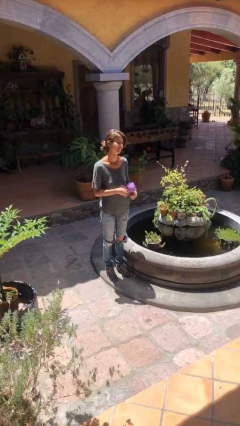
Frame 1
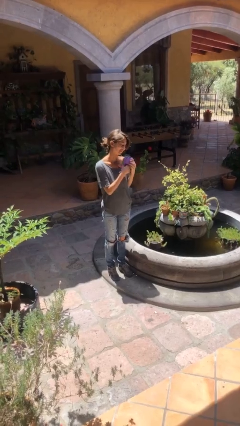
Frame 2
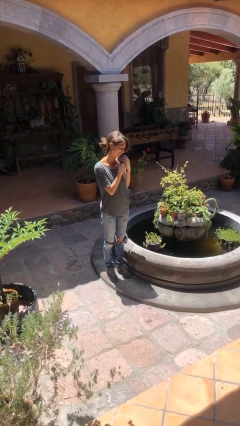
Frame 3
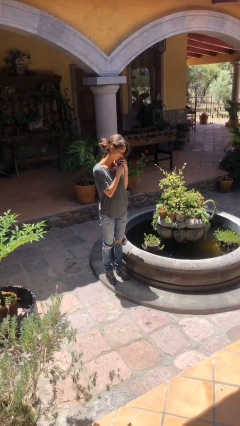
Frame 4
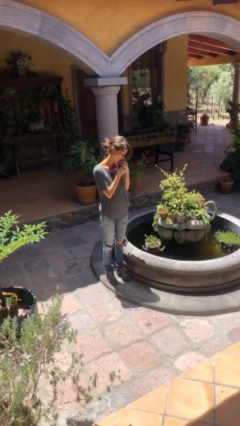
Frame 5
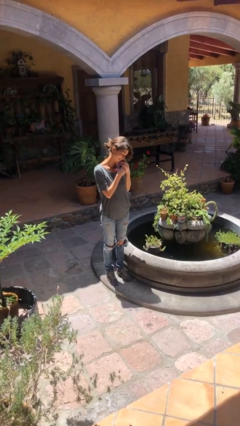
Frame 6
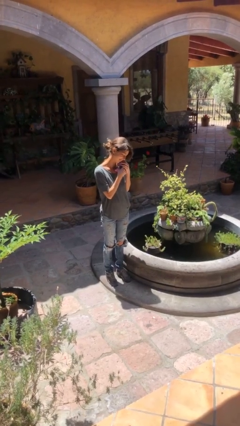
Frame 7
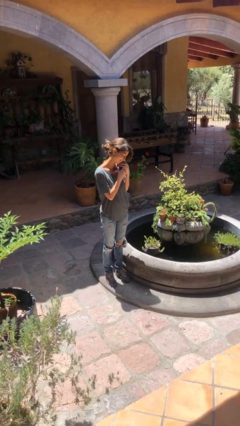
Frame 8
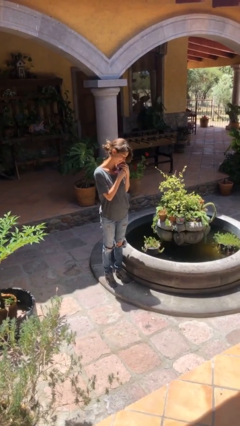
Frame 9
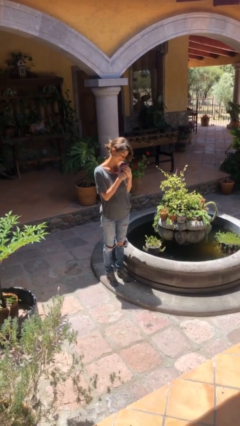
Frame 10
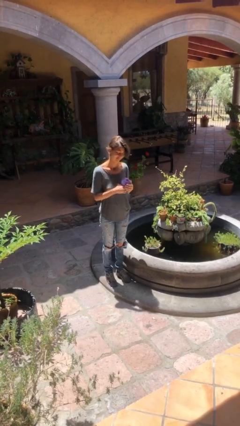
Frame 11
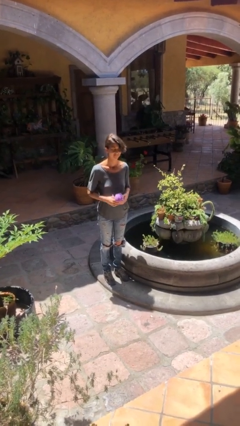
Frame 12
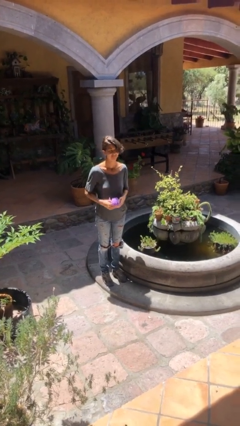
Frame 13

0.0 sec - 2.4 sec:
person hugs stuffed animal

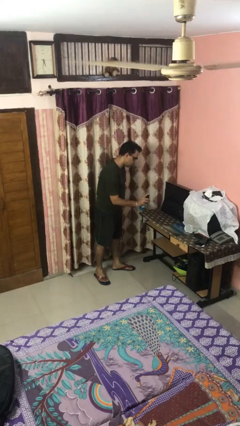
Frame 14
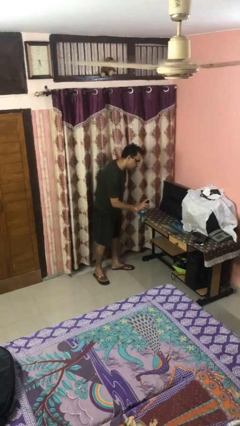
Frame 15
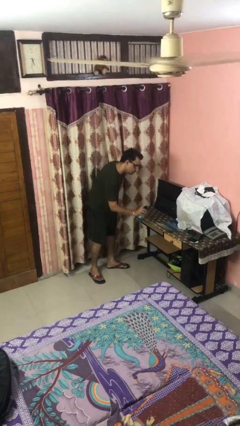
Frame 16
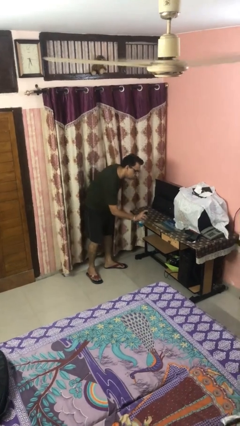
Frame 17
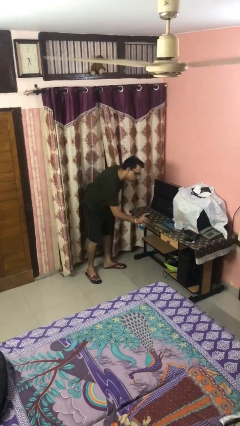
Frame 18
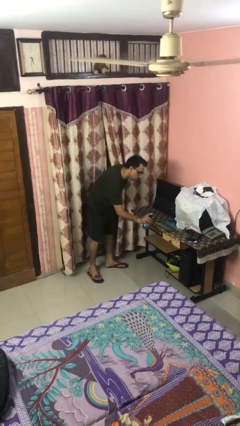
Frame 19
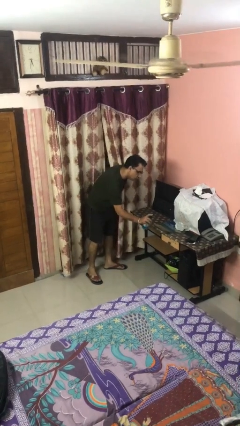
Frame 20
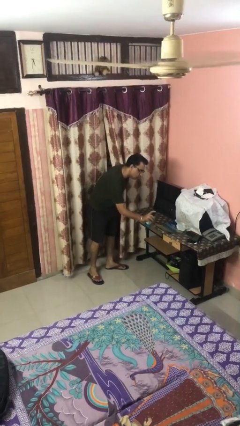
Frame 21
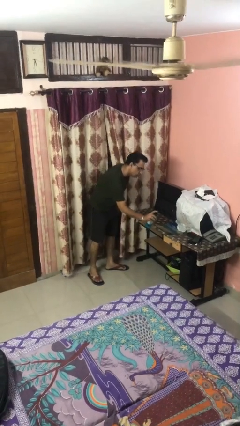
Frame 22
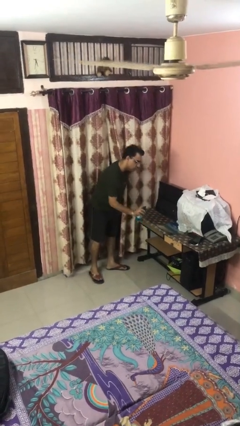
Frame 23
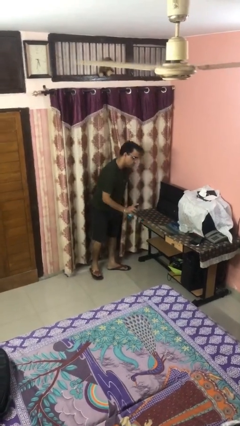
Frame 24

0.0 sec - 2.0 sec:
person sprays from bottle

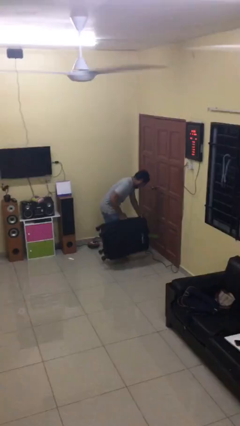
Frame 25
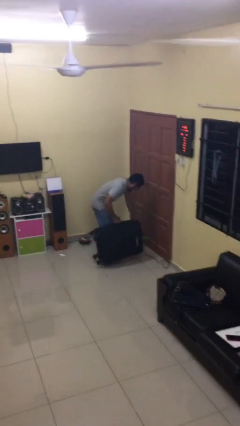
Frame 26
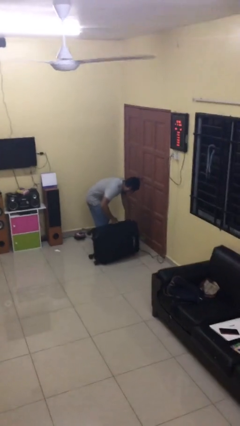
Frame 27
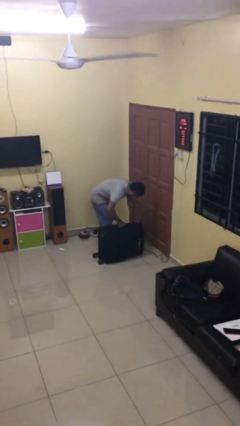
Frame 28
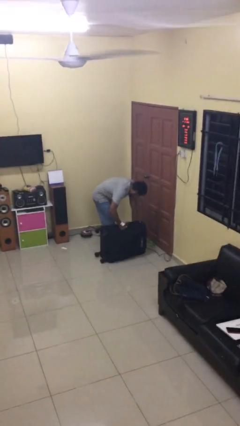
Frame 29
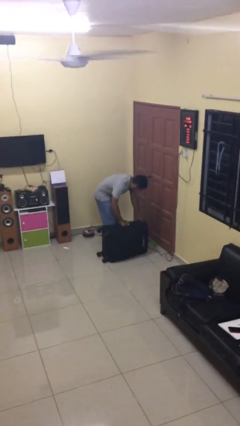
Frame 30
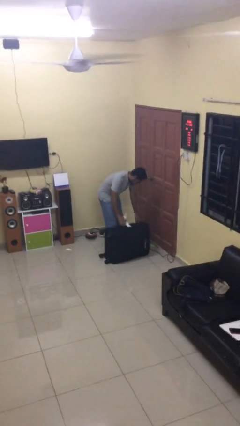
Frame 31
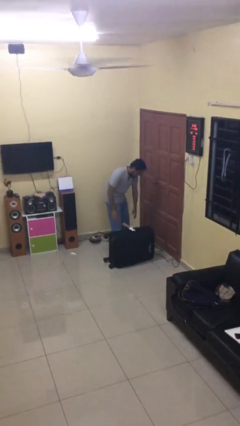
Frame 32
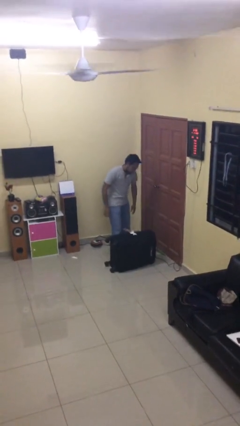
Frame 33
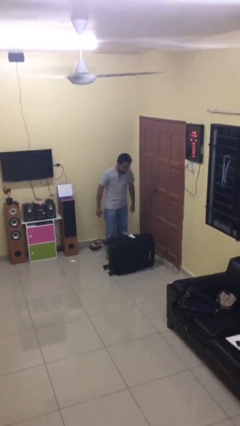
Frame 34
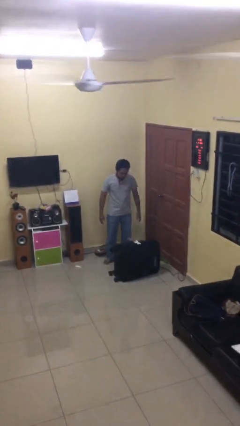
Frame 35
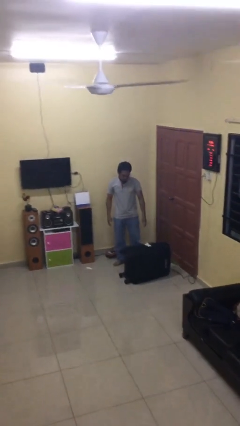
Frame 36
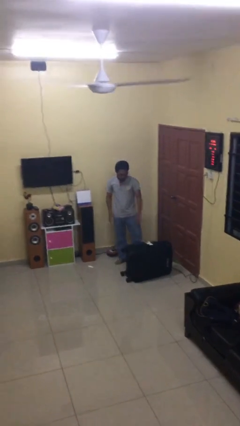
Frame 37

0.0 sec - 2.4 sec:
person puts down object on floor

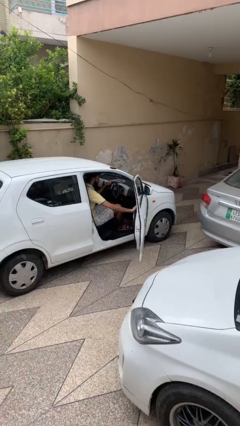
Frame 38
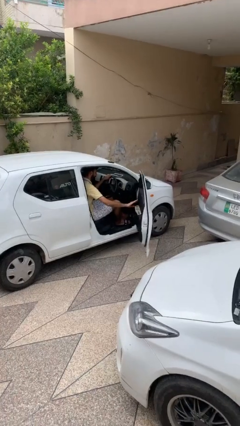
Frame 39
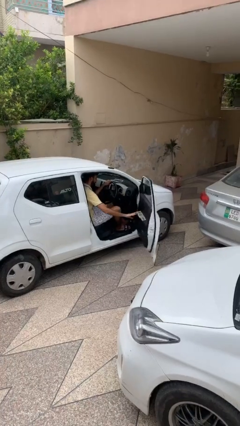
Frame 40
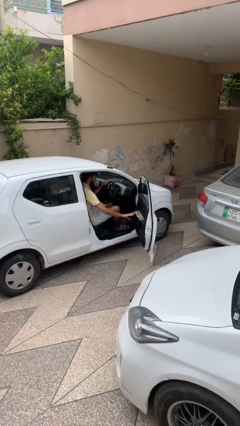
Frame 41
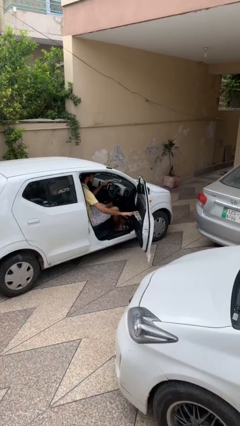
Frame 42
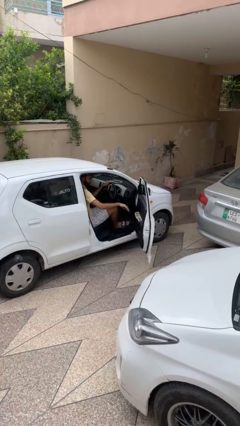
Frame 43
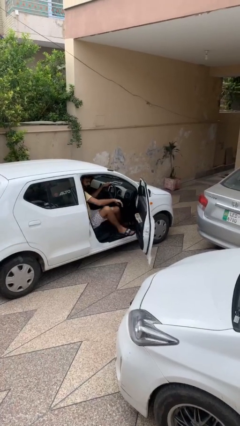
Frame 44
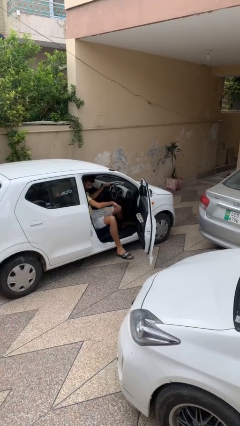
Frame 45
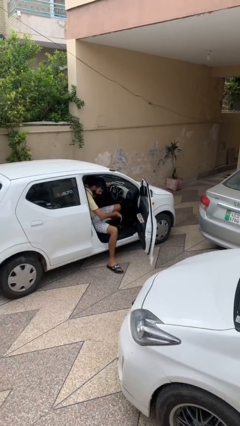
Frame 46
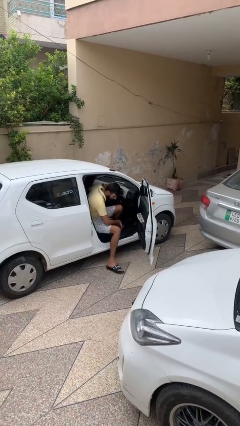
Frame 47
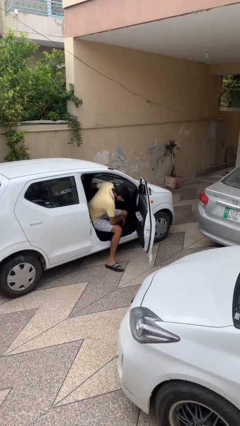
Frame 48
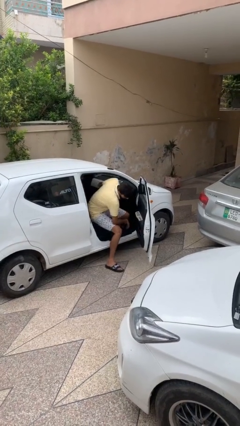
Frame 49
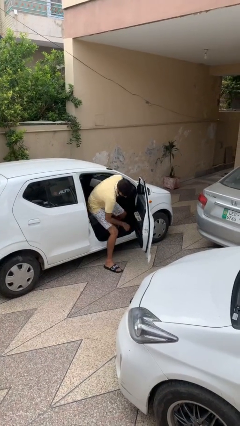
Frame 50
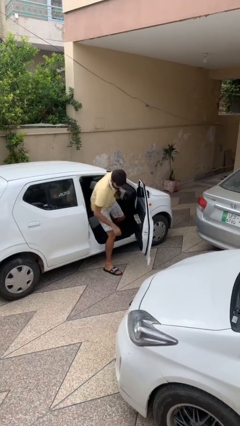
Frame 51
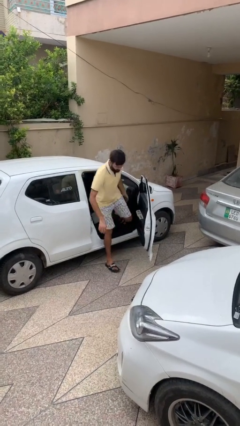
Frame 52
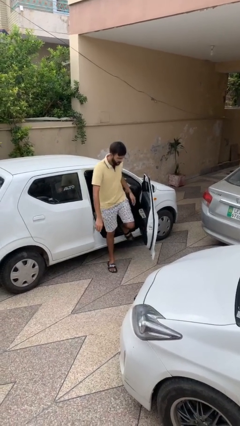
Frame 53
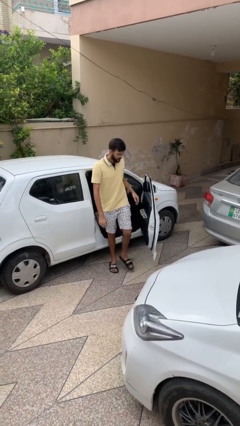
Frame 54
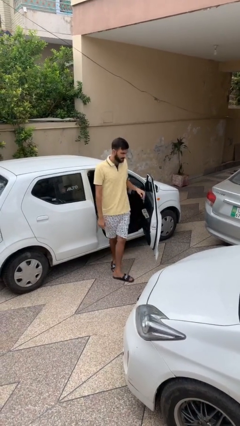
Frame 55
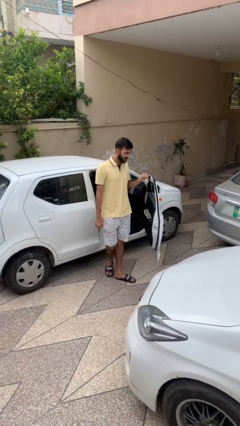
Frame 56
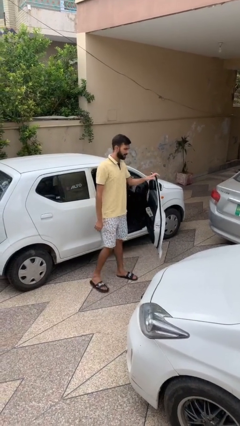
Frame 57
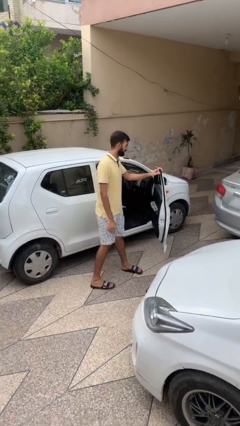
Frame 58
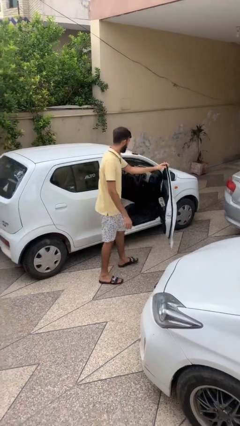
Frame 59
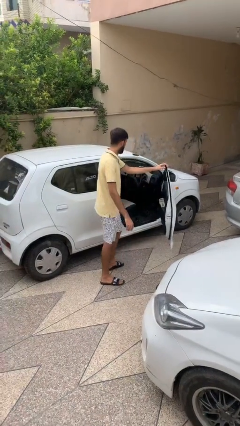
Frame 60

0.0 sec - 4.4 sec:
person exits car

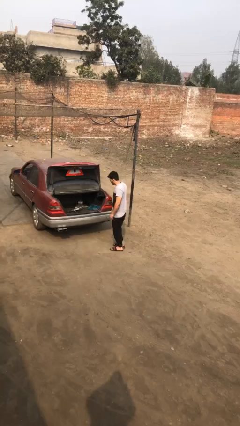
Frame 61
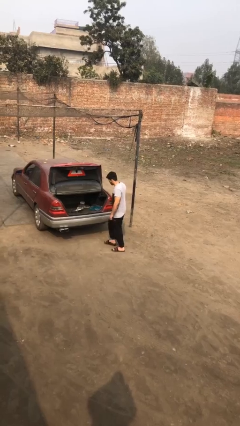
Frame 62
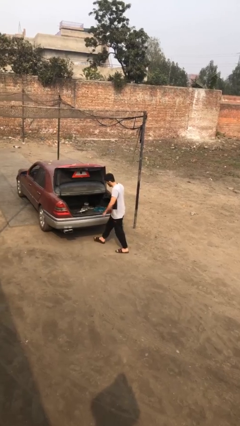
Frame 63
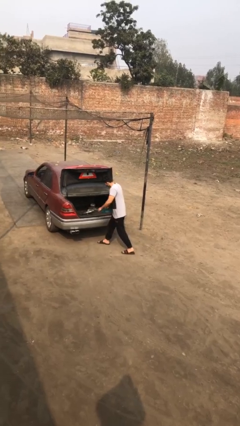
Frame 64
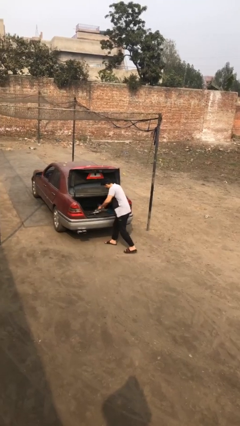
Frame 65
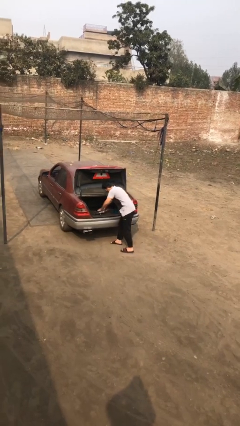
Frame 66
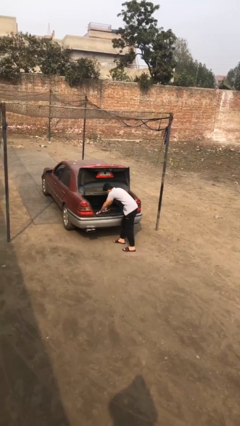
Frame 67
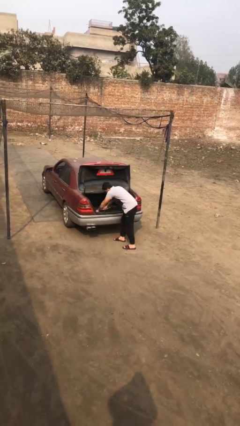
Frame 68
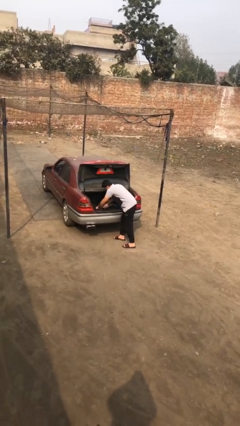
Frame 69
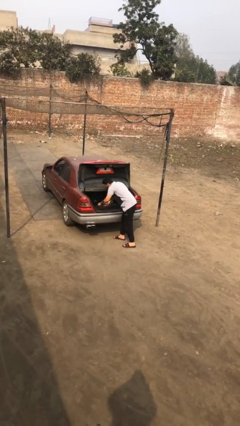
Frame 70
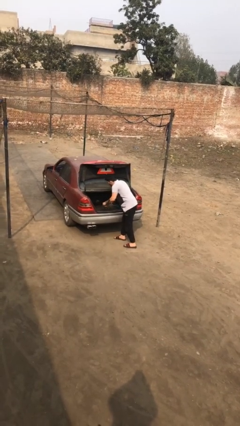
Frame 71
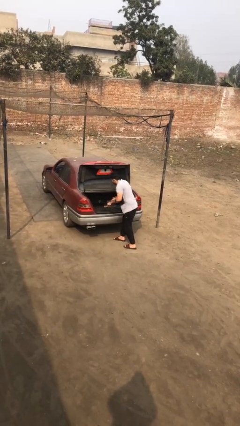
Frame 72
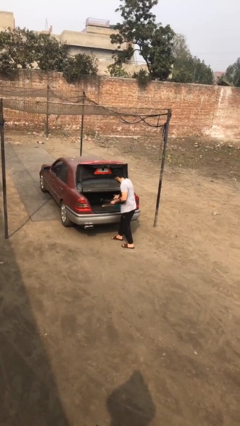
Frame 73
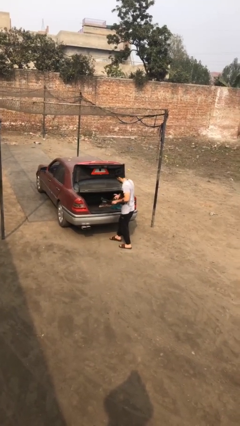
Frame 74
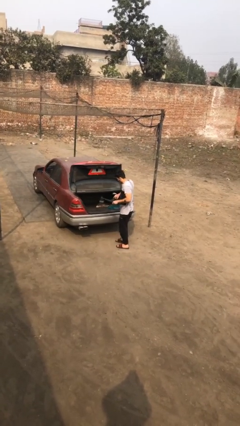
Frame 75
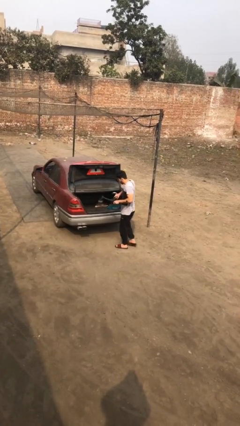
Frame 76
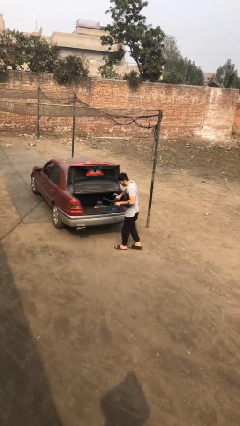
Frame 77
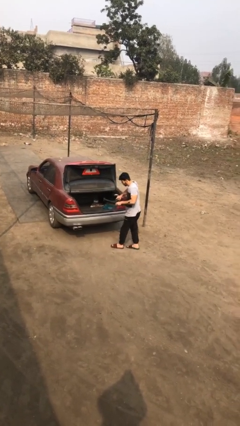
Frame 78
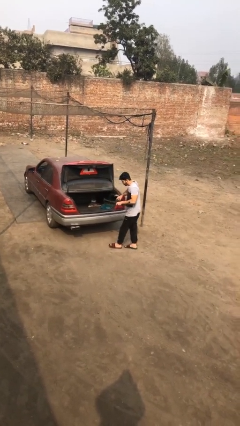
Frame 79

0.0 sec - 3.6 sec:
person unloads car

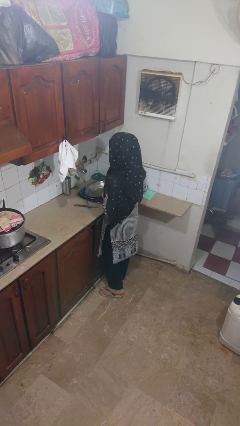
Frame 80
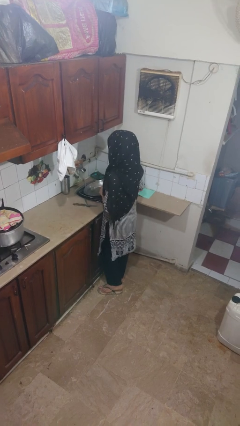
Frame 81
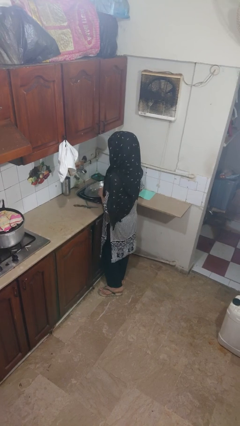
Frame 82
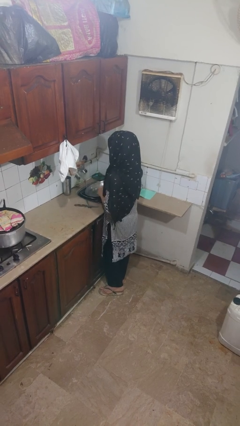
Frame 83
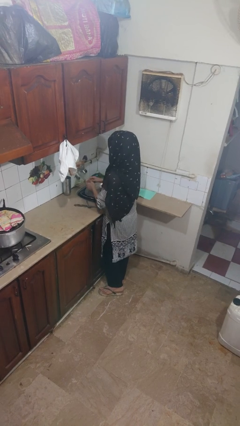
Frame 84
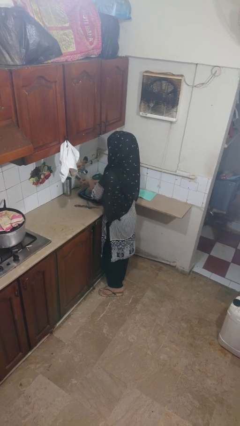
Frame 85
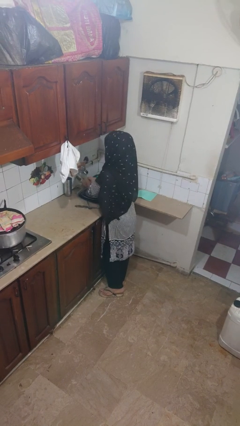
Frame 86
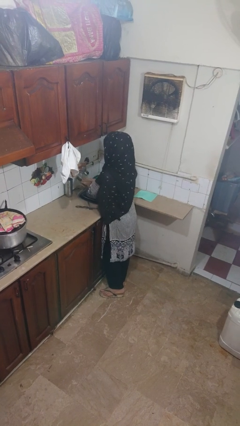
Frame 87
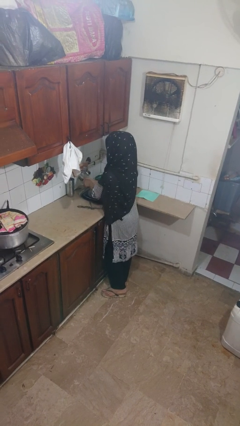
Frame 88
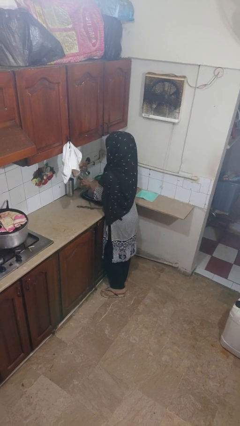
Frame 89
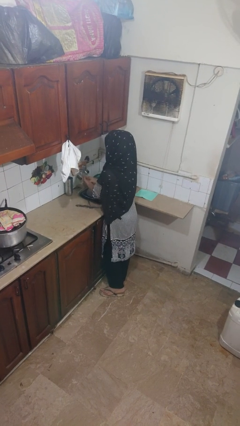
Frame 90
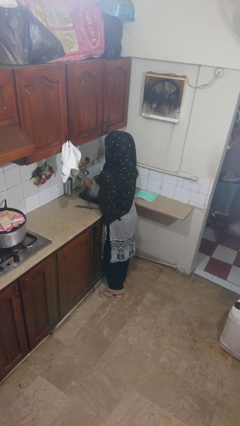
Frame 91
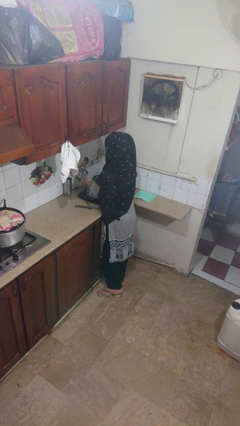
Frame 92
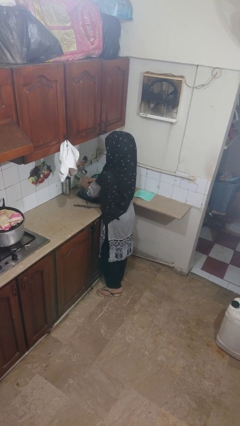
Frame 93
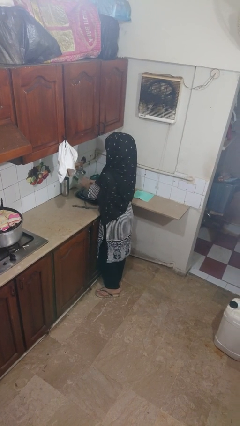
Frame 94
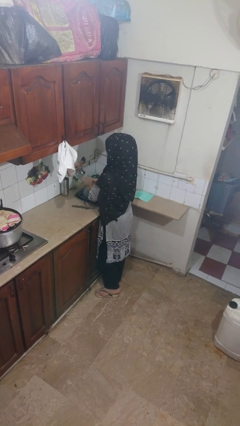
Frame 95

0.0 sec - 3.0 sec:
person washes hands
